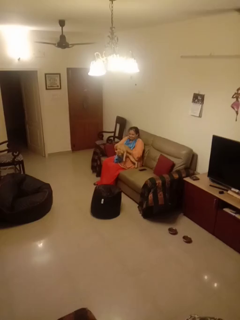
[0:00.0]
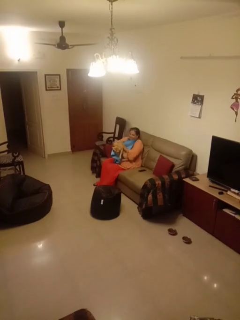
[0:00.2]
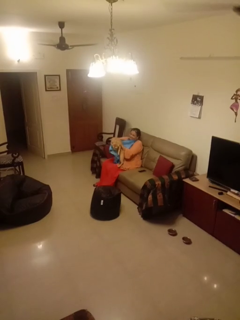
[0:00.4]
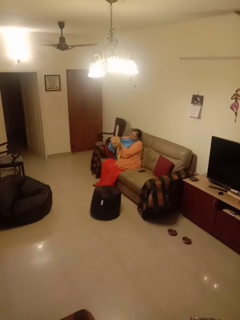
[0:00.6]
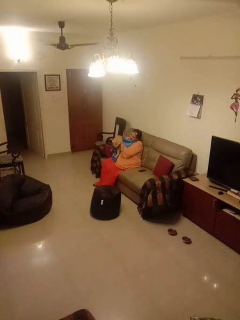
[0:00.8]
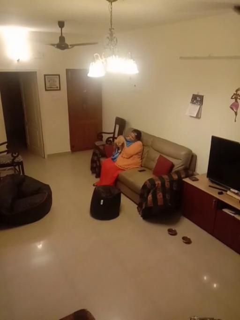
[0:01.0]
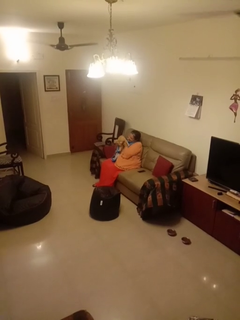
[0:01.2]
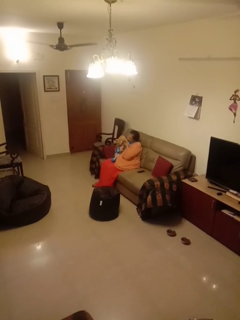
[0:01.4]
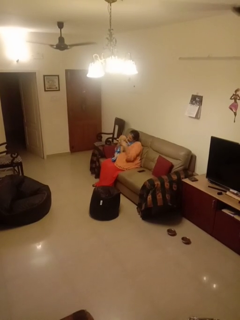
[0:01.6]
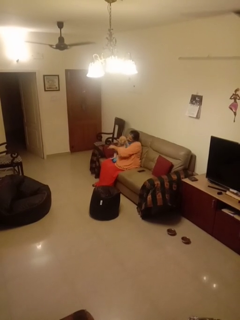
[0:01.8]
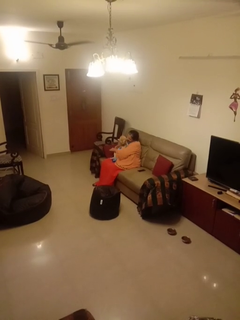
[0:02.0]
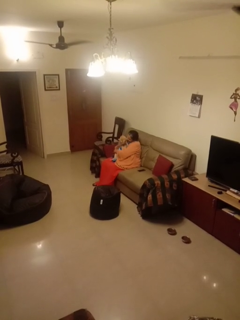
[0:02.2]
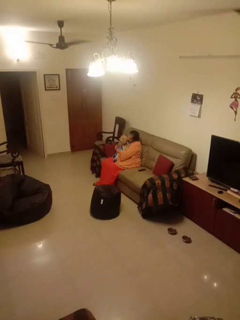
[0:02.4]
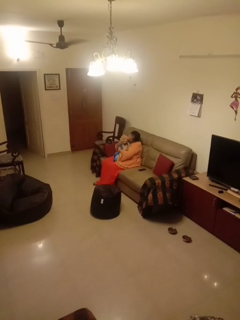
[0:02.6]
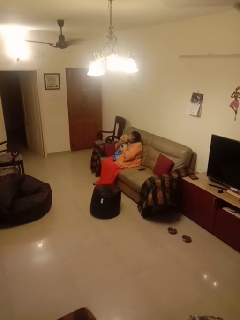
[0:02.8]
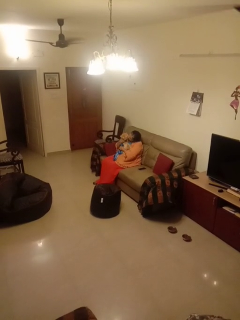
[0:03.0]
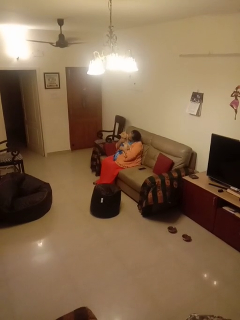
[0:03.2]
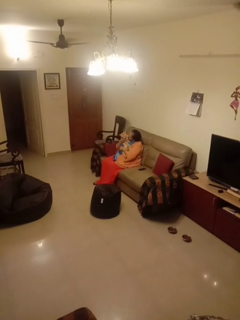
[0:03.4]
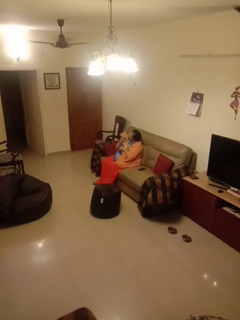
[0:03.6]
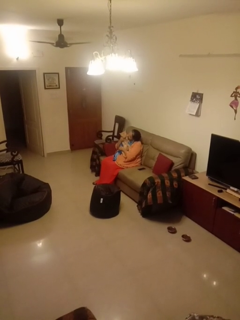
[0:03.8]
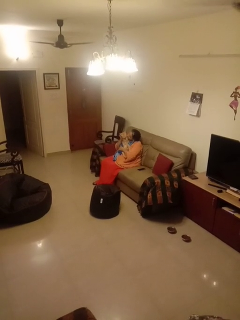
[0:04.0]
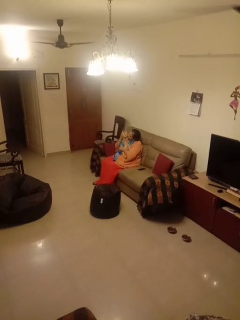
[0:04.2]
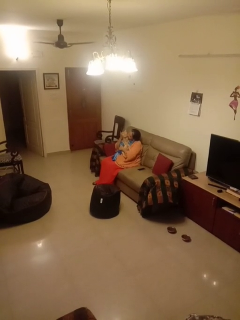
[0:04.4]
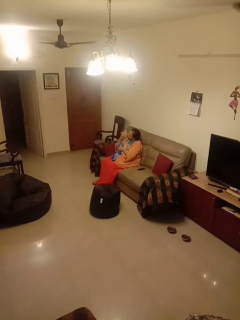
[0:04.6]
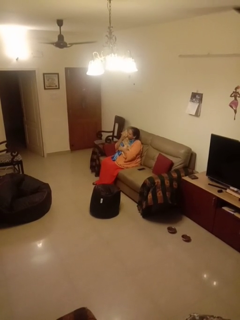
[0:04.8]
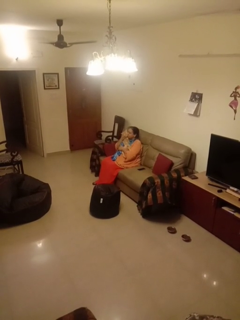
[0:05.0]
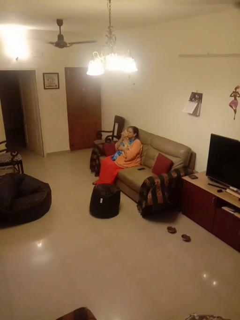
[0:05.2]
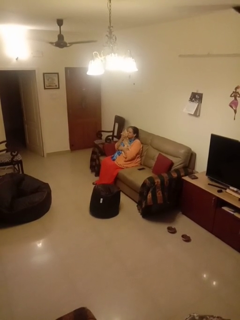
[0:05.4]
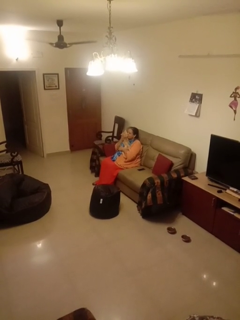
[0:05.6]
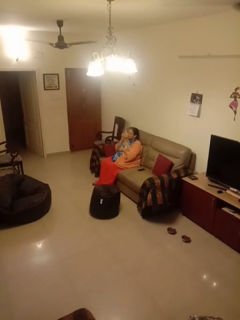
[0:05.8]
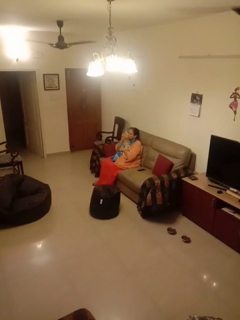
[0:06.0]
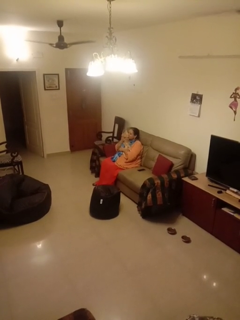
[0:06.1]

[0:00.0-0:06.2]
person hugs cat

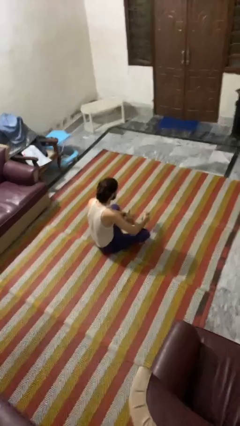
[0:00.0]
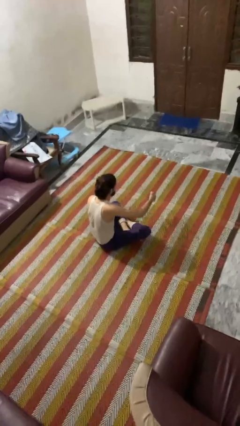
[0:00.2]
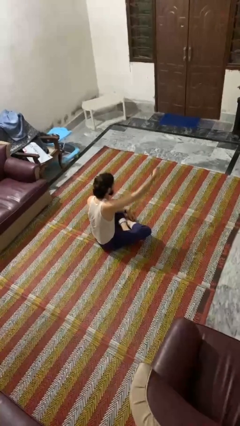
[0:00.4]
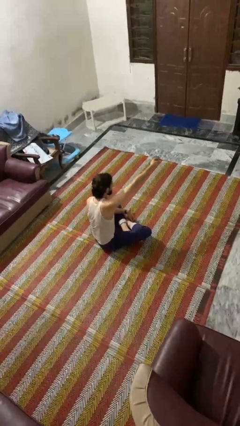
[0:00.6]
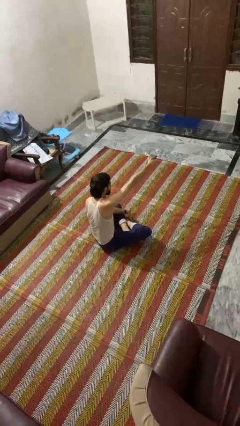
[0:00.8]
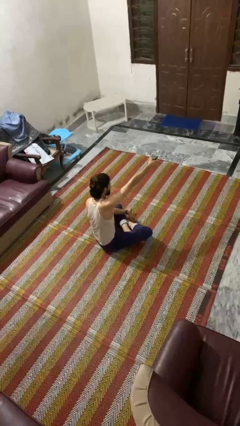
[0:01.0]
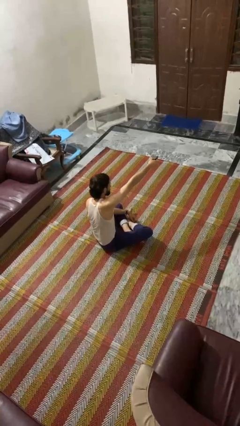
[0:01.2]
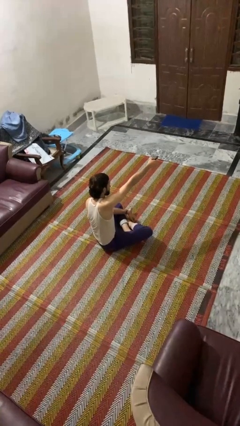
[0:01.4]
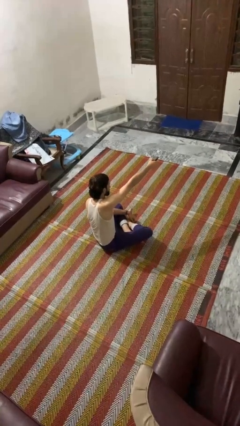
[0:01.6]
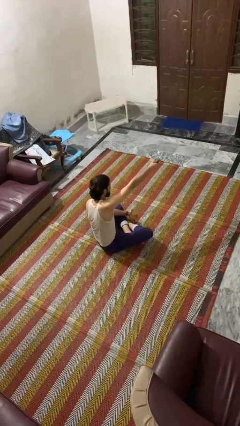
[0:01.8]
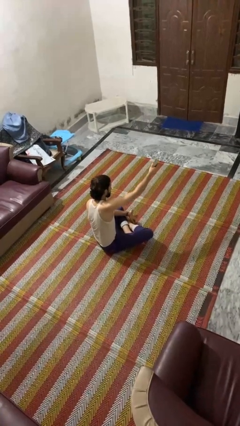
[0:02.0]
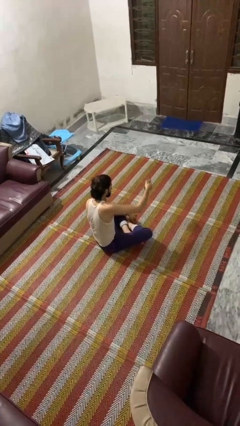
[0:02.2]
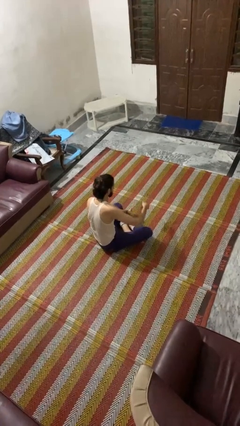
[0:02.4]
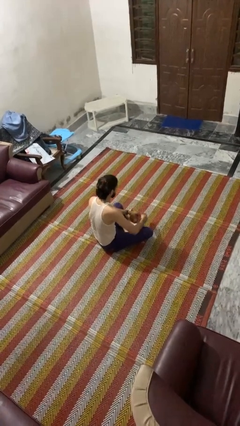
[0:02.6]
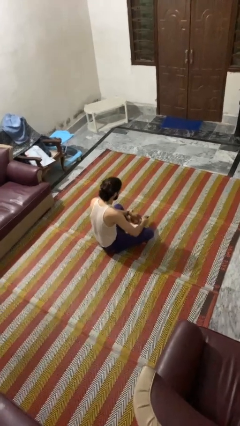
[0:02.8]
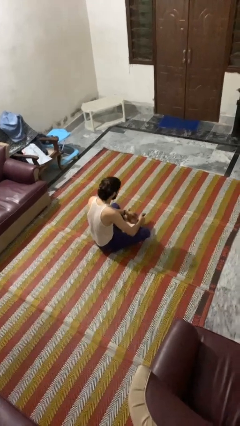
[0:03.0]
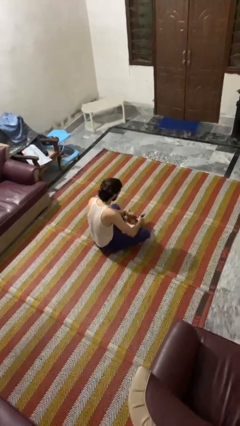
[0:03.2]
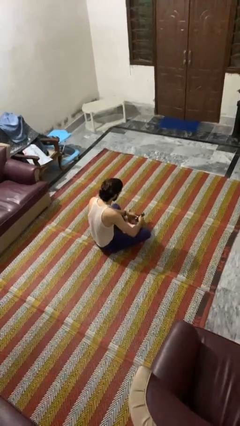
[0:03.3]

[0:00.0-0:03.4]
person uses television remote

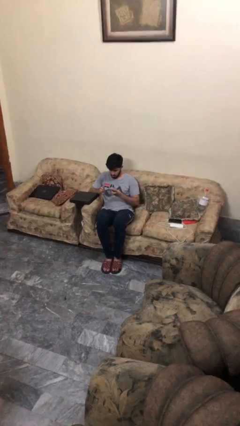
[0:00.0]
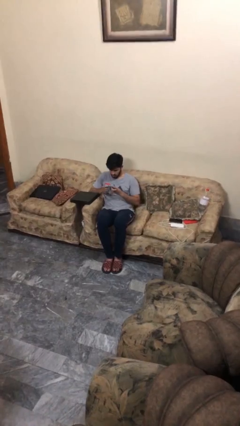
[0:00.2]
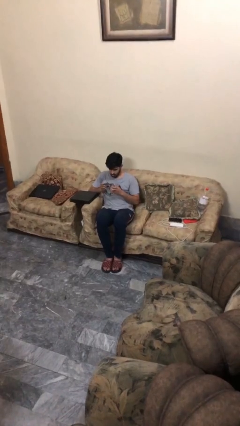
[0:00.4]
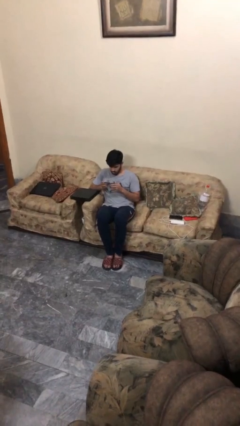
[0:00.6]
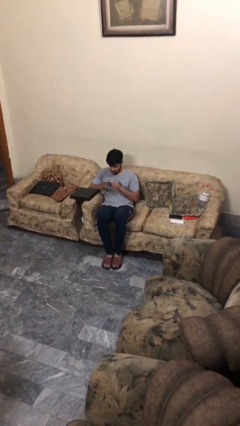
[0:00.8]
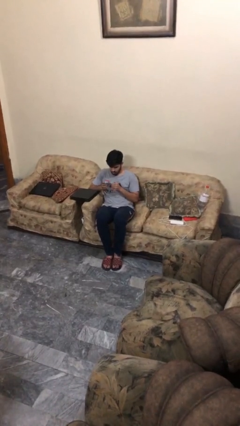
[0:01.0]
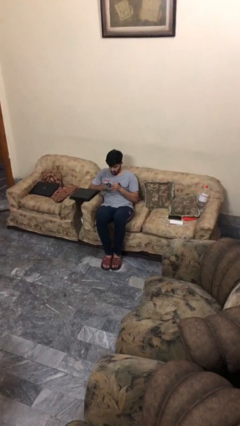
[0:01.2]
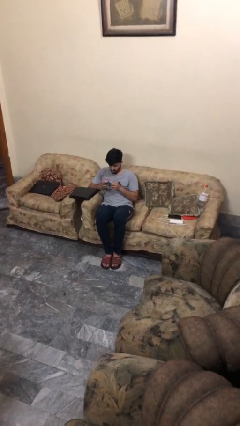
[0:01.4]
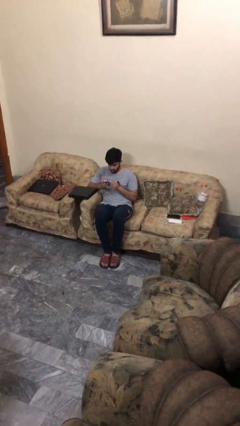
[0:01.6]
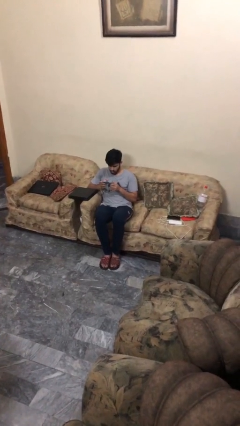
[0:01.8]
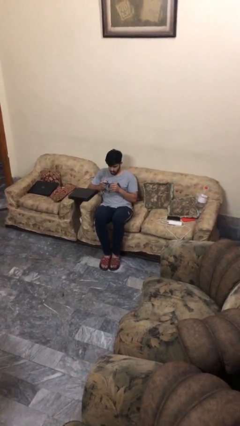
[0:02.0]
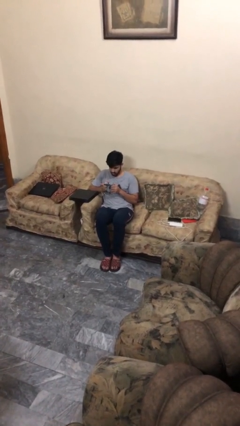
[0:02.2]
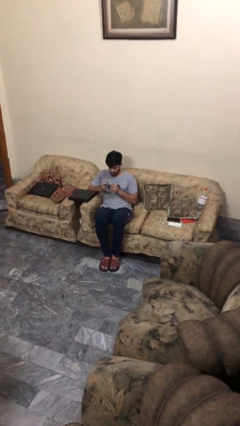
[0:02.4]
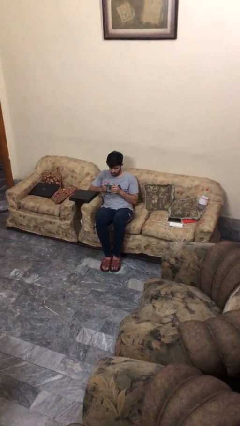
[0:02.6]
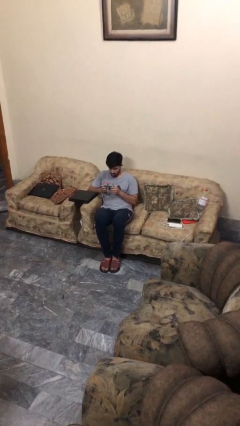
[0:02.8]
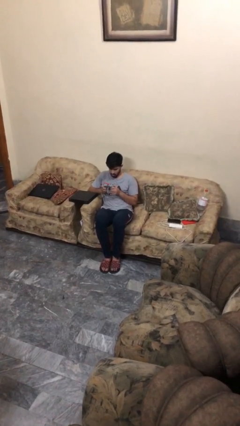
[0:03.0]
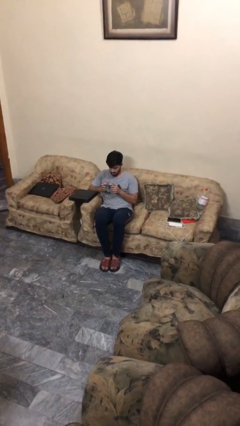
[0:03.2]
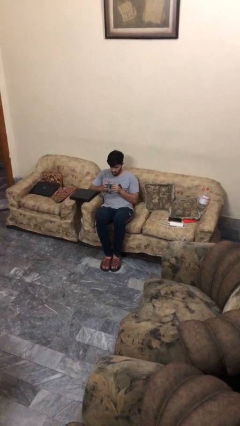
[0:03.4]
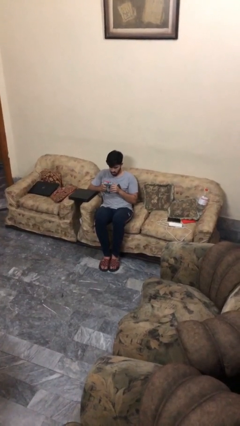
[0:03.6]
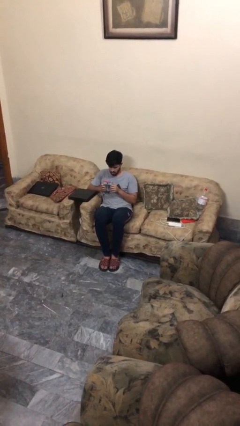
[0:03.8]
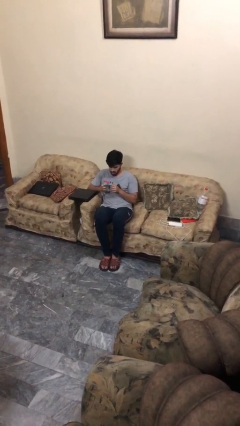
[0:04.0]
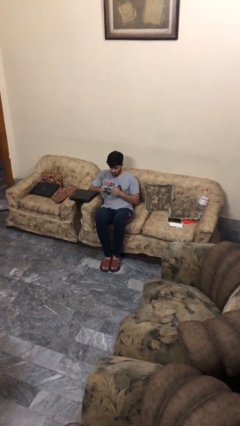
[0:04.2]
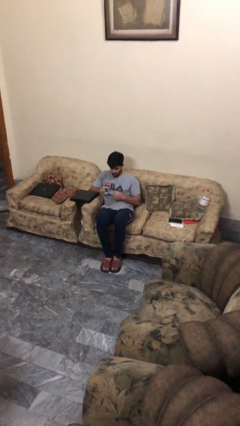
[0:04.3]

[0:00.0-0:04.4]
person interacts with handheld game

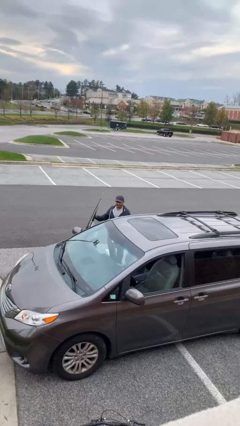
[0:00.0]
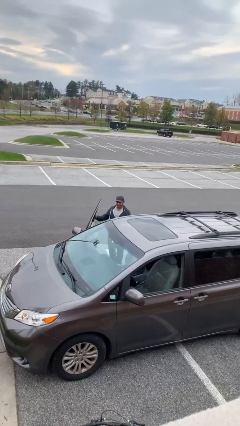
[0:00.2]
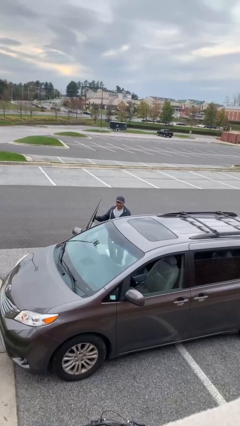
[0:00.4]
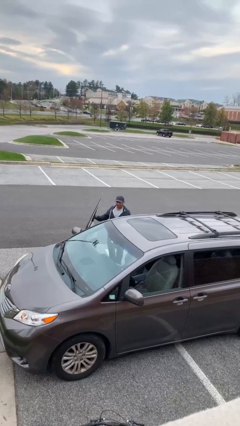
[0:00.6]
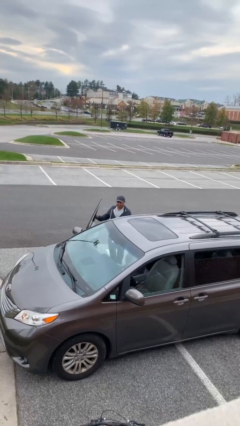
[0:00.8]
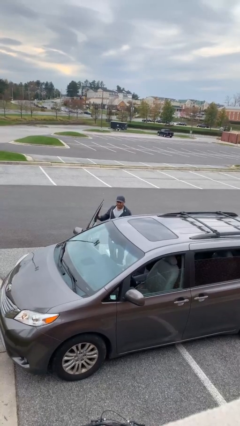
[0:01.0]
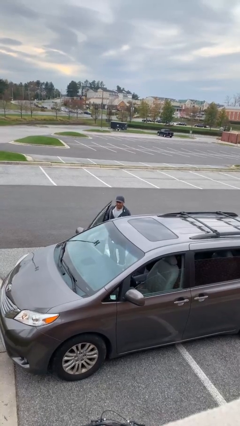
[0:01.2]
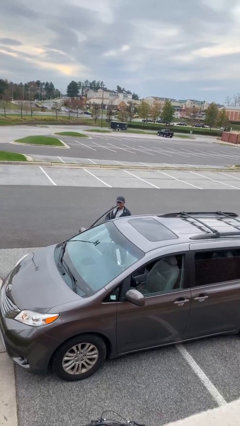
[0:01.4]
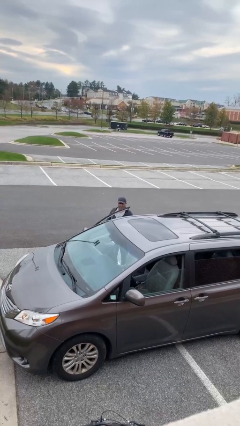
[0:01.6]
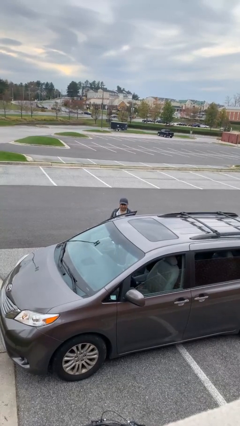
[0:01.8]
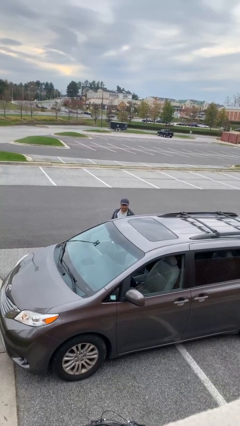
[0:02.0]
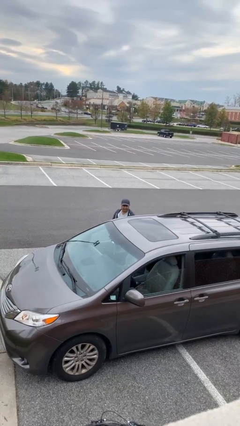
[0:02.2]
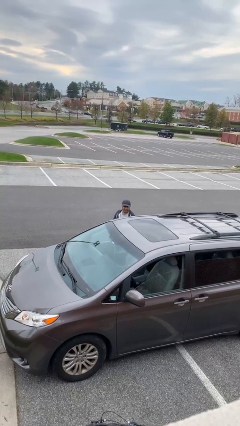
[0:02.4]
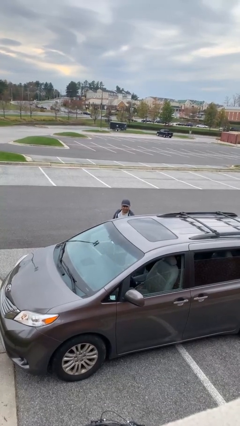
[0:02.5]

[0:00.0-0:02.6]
person closes car door

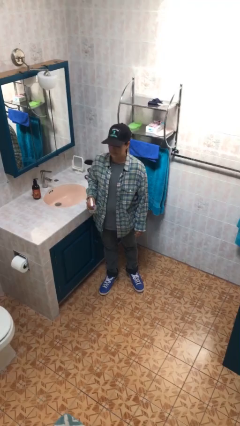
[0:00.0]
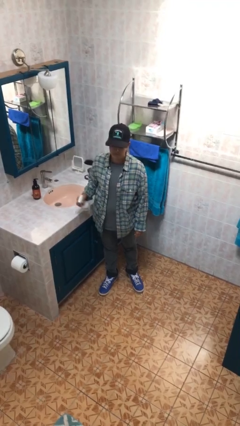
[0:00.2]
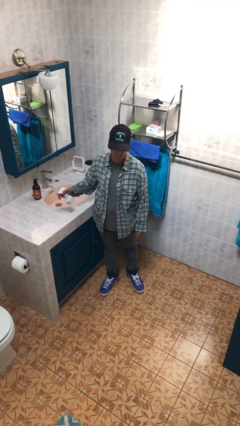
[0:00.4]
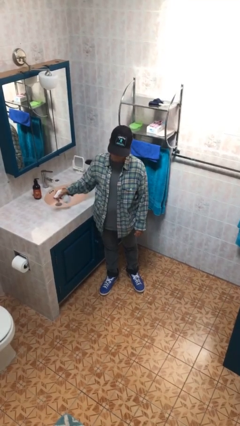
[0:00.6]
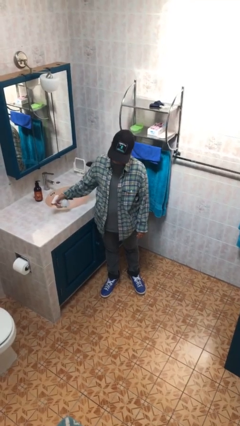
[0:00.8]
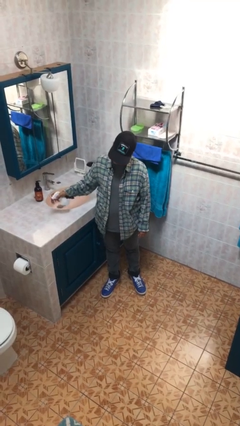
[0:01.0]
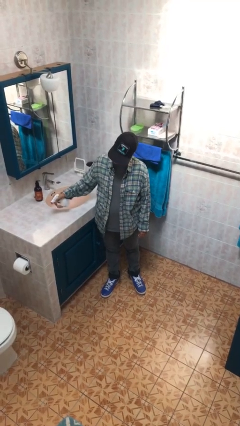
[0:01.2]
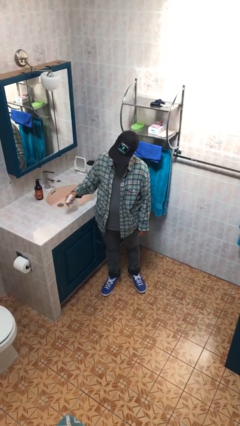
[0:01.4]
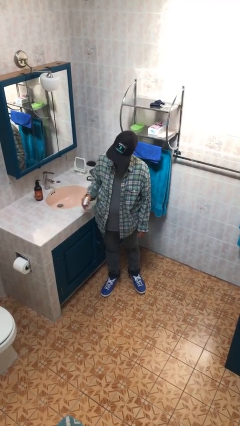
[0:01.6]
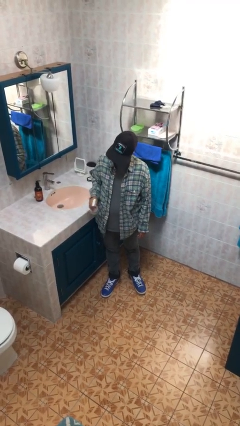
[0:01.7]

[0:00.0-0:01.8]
person sprays from bottle

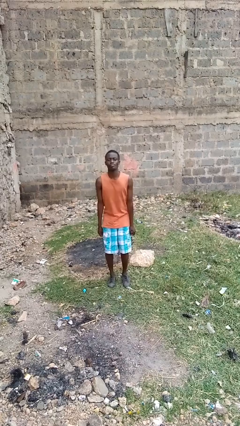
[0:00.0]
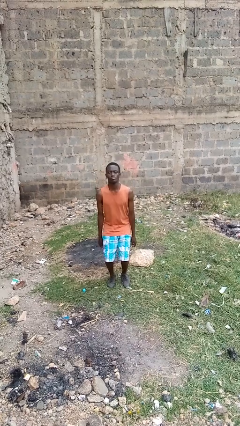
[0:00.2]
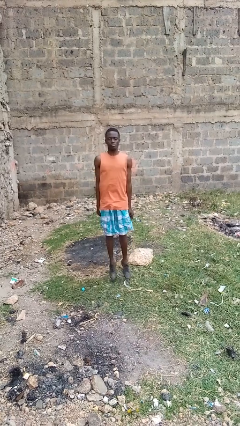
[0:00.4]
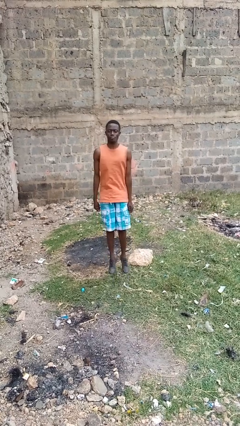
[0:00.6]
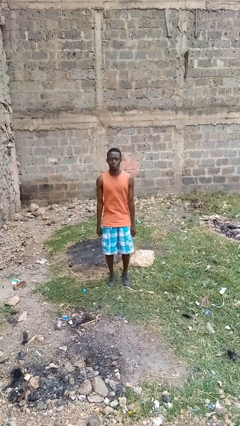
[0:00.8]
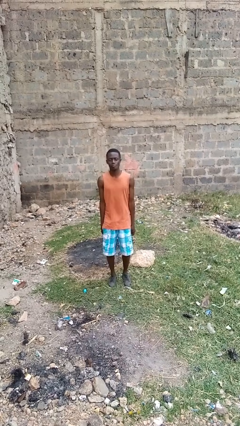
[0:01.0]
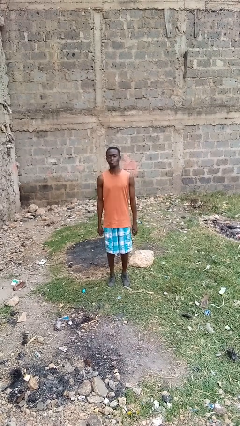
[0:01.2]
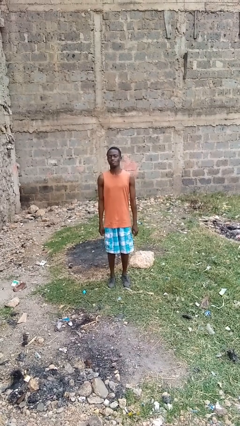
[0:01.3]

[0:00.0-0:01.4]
person jumps
